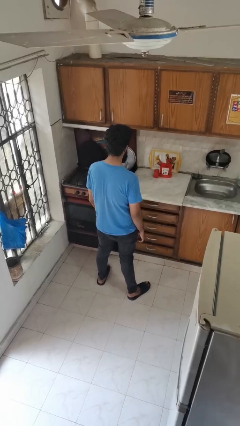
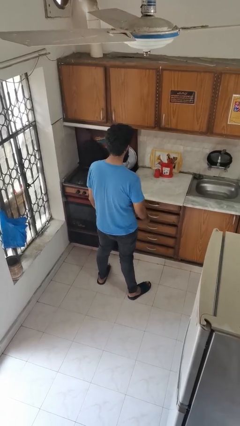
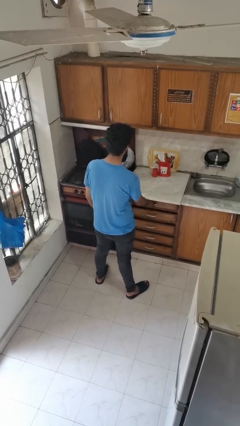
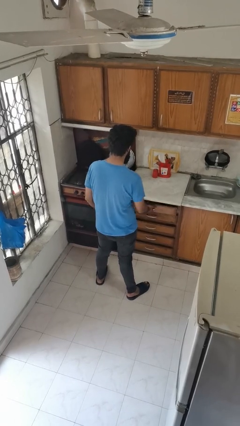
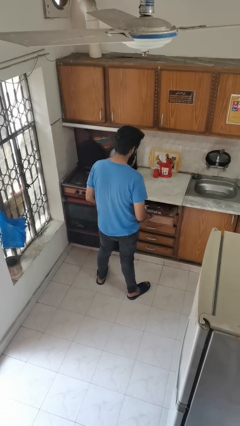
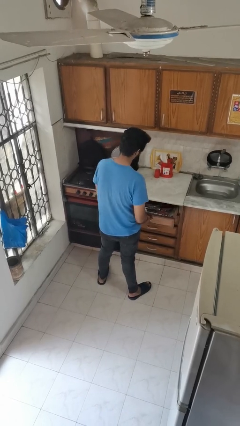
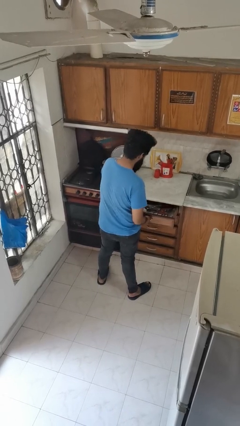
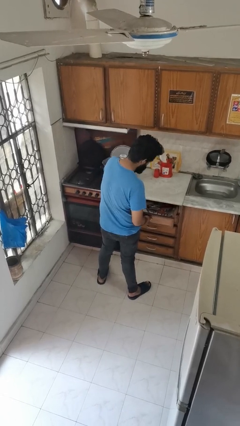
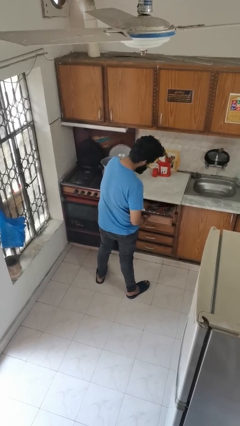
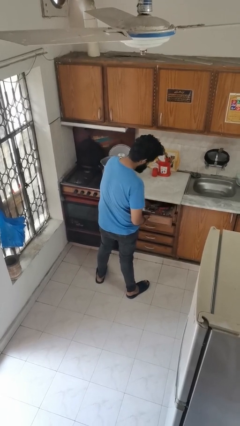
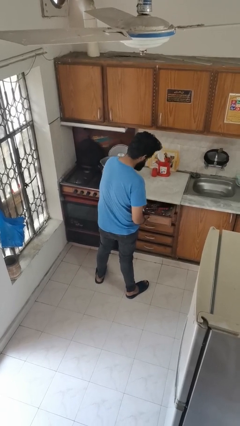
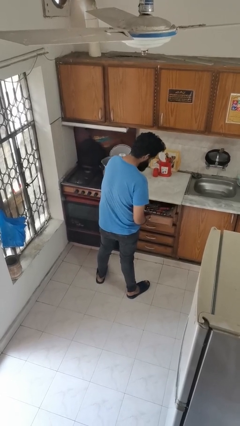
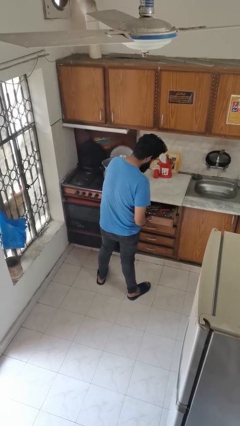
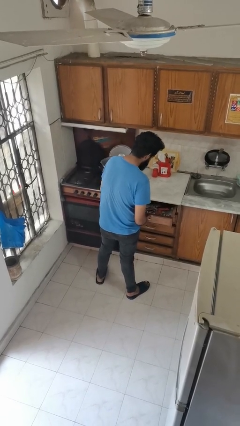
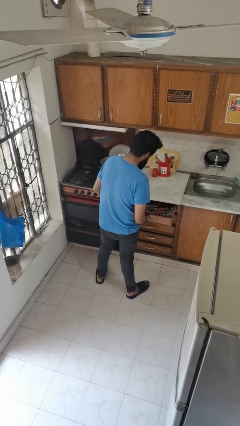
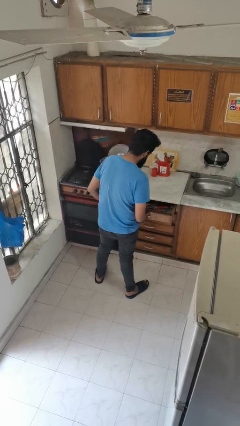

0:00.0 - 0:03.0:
person searches in kitchen drawer

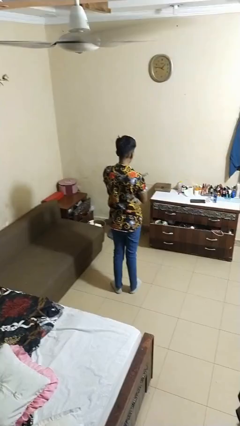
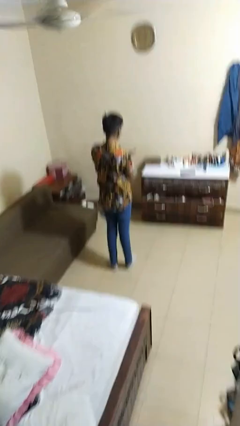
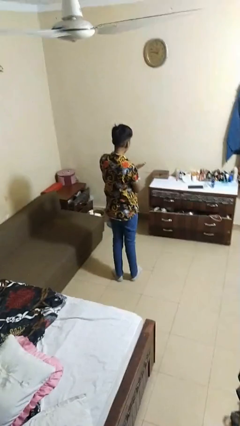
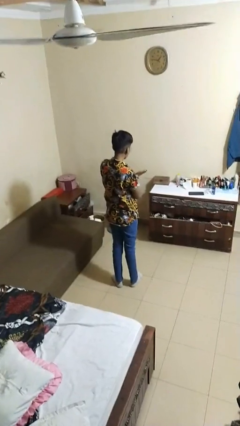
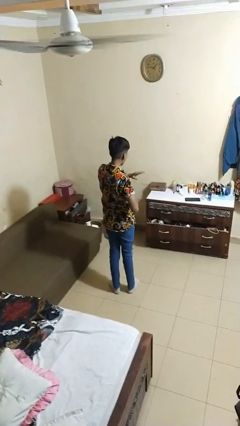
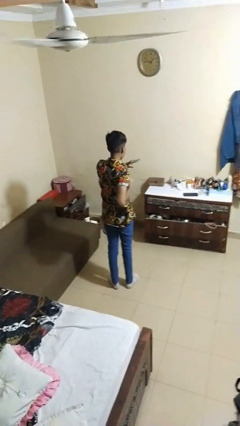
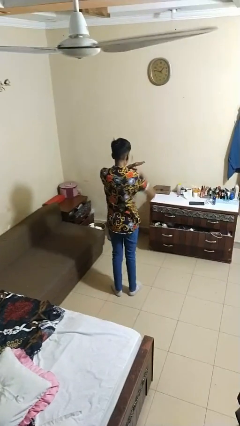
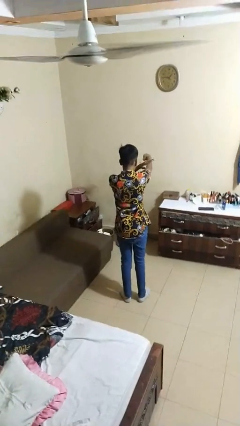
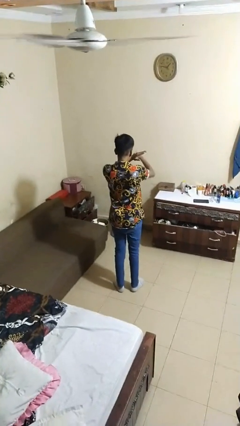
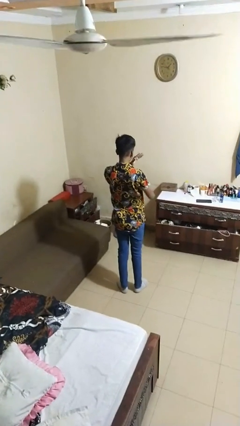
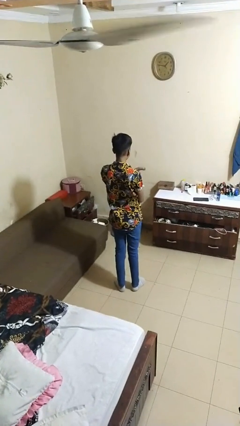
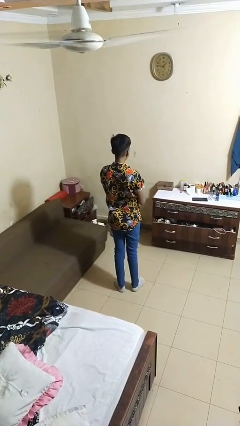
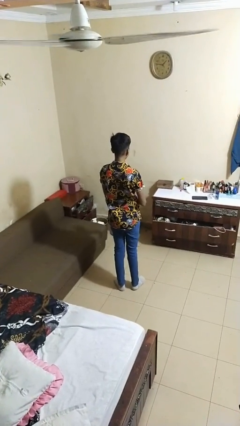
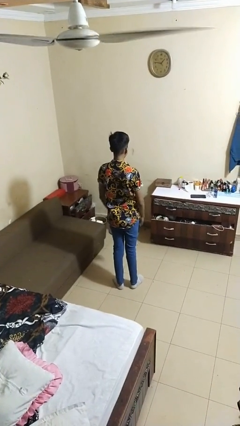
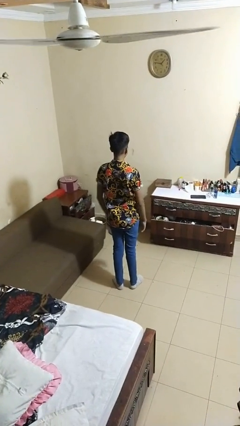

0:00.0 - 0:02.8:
person karate chop

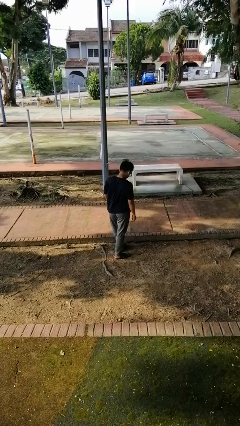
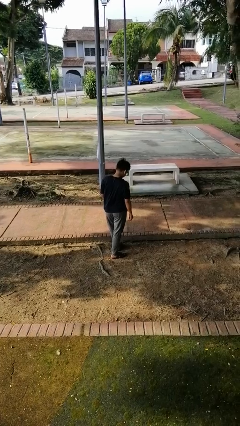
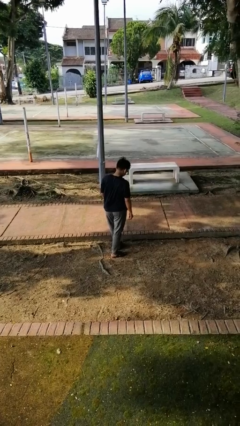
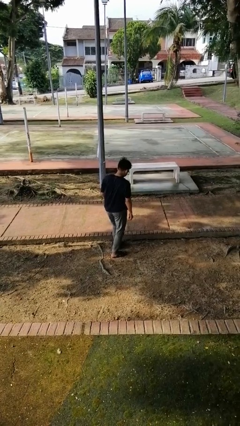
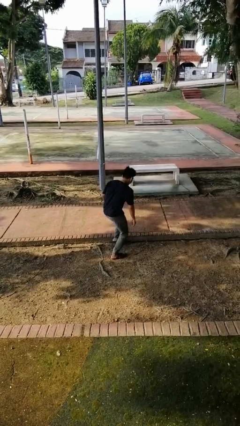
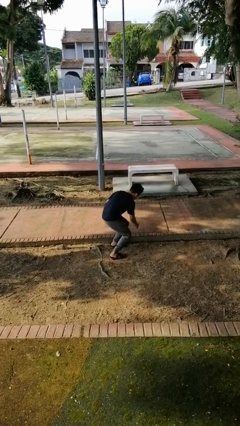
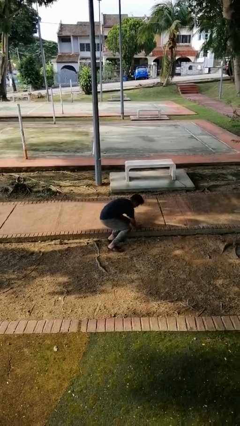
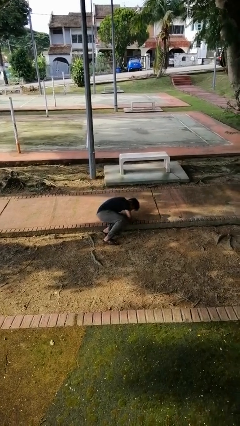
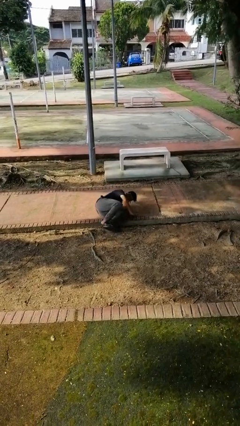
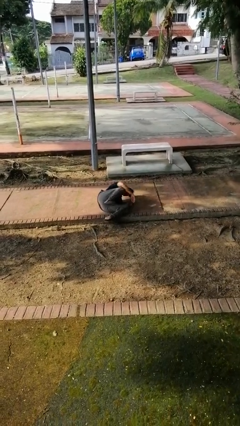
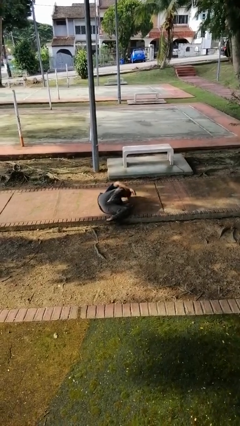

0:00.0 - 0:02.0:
person trips on object on floor

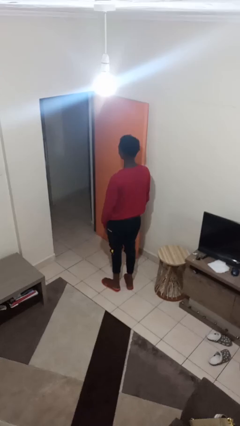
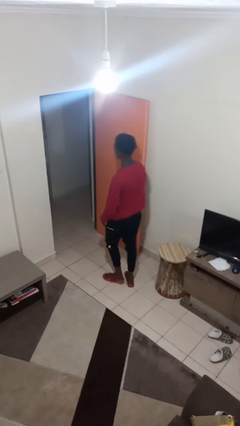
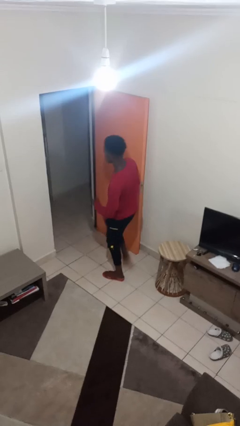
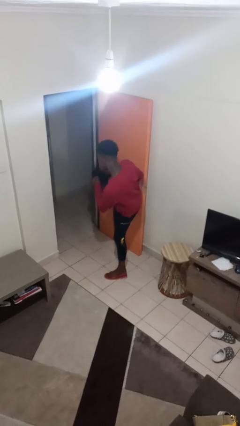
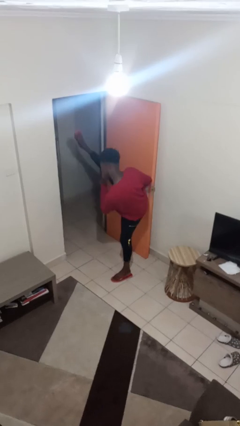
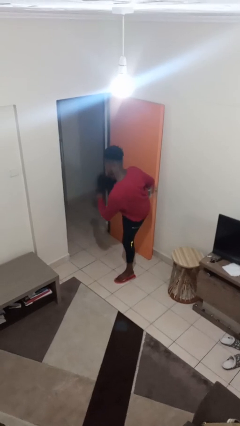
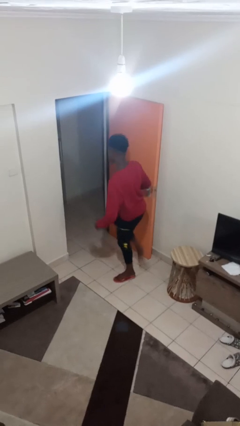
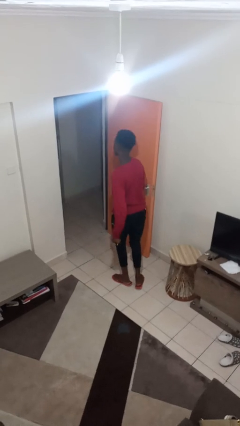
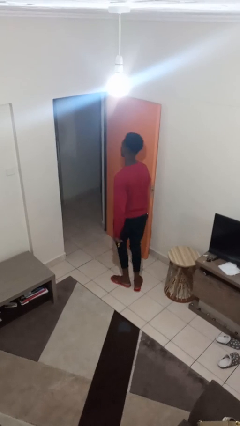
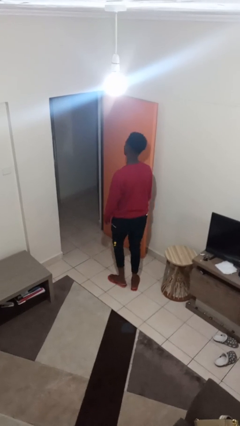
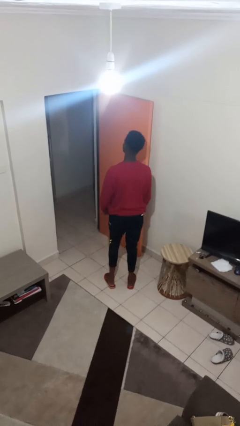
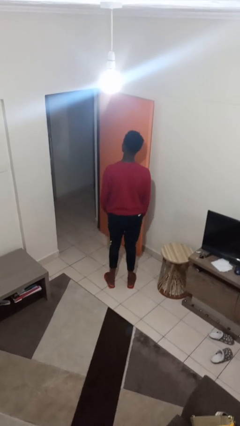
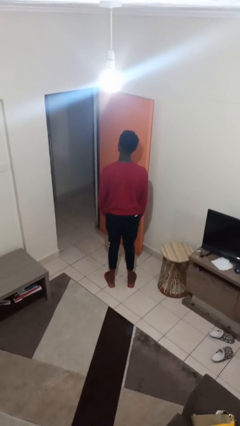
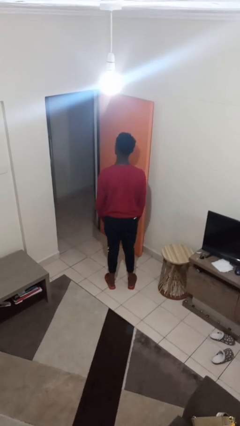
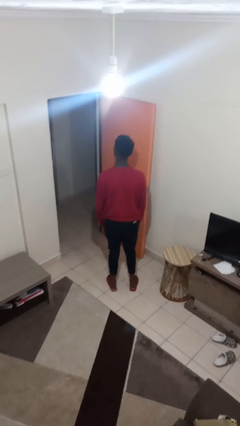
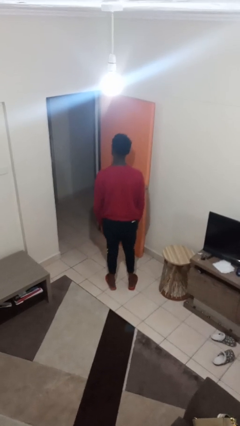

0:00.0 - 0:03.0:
person karate kicks

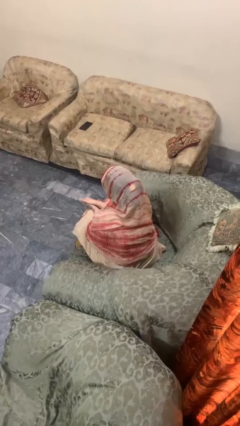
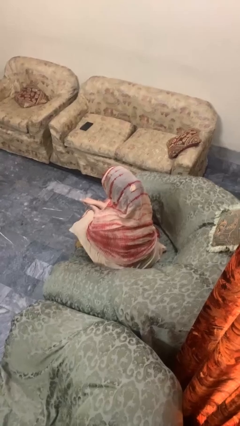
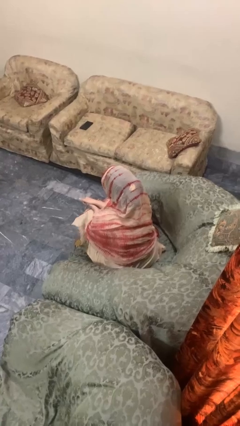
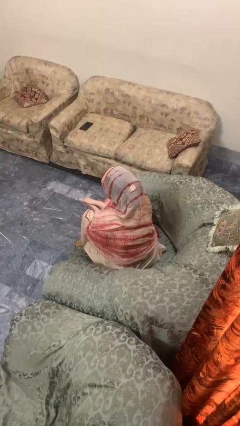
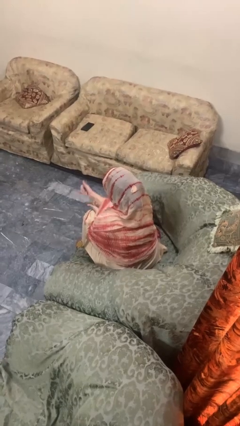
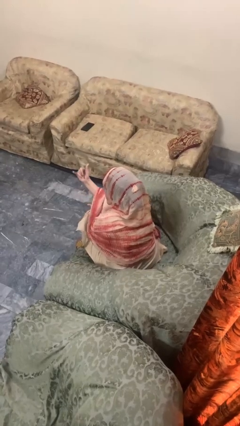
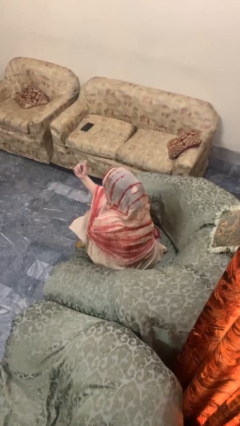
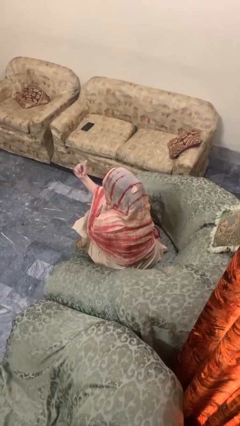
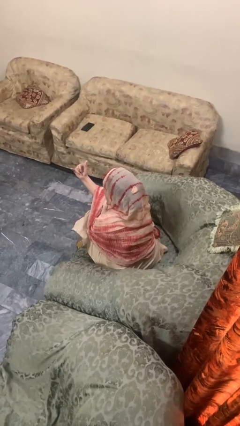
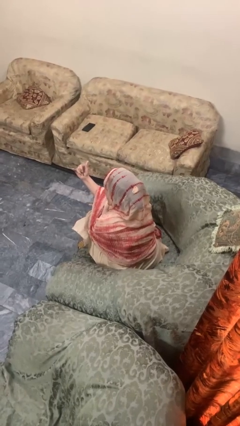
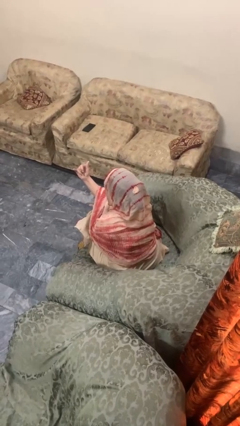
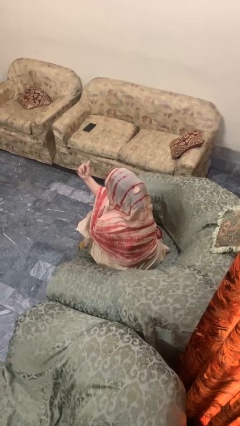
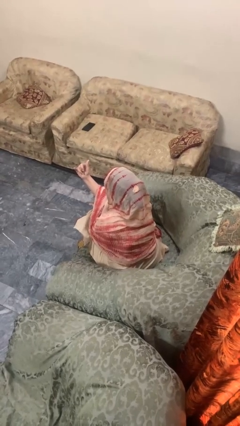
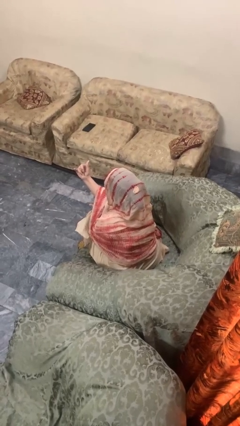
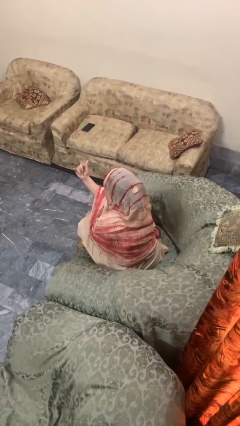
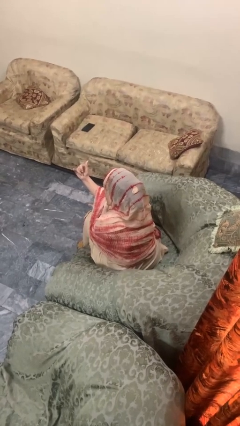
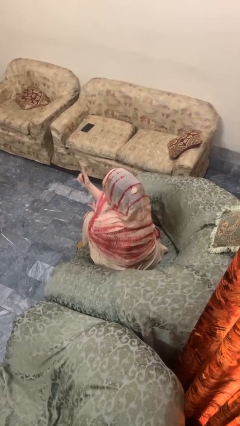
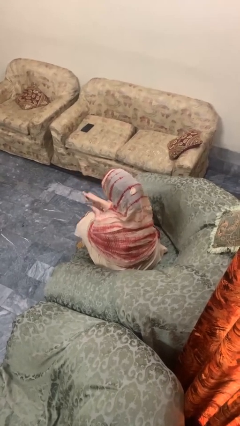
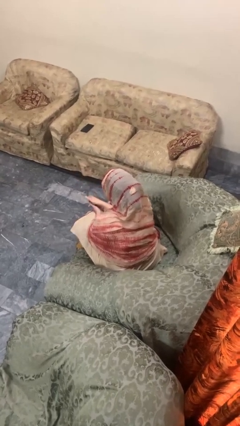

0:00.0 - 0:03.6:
person gestures hang loose

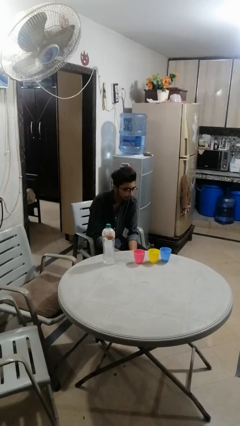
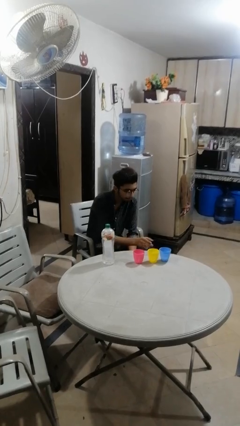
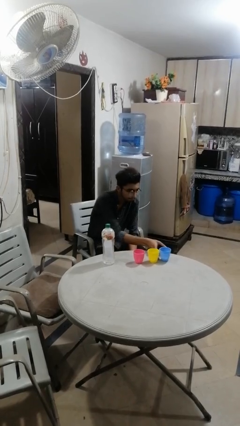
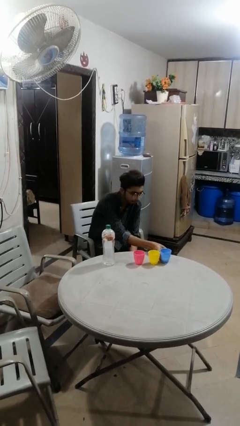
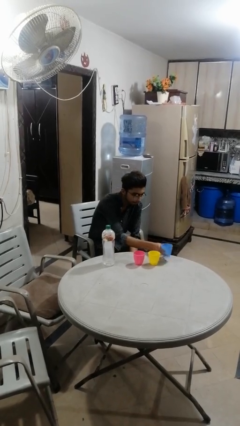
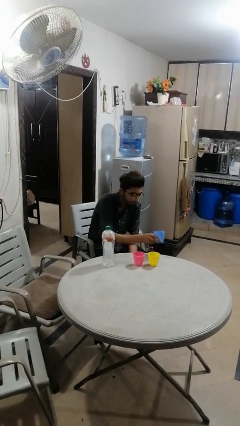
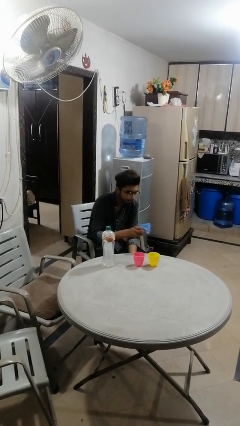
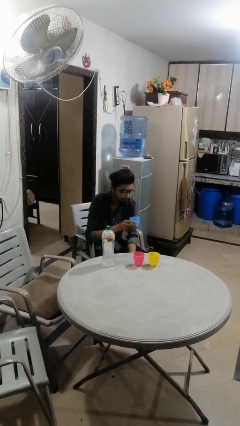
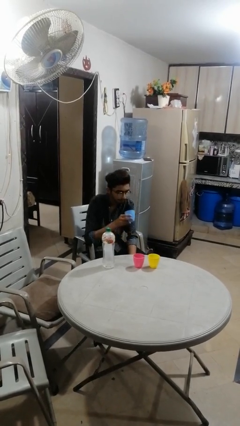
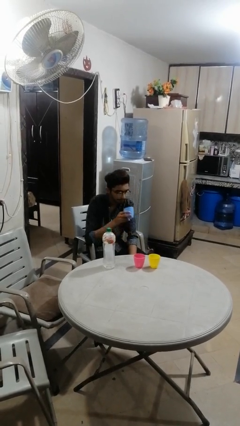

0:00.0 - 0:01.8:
person picks up object from table

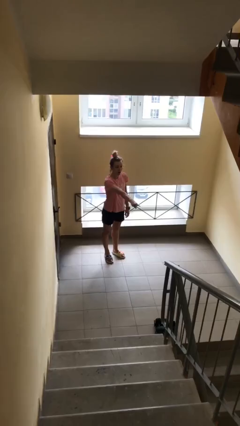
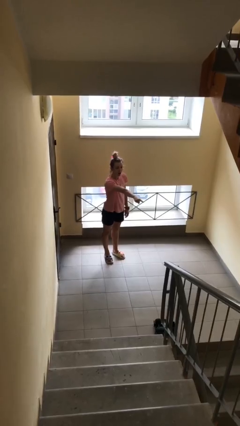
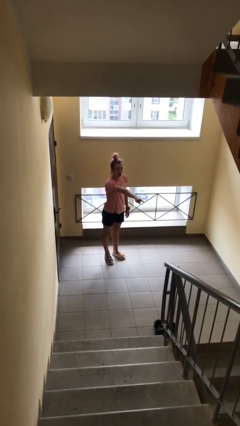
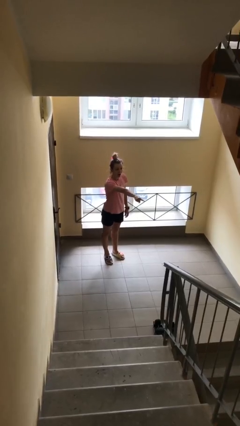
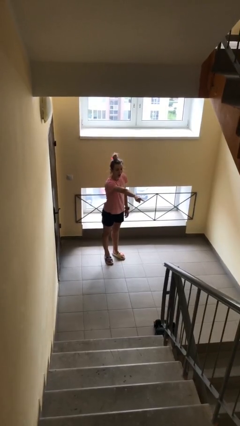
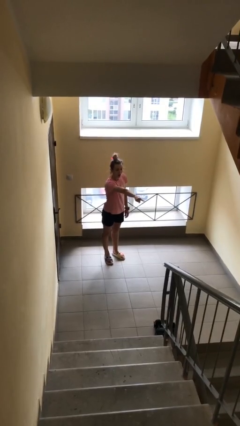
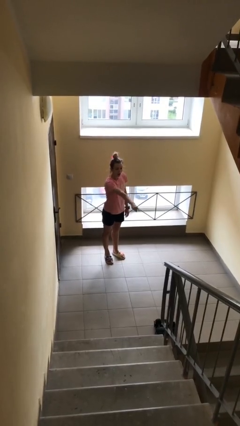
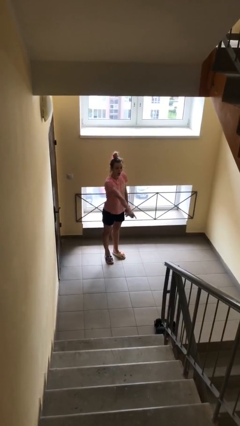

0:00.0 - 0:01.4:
person points at person
